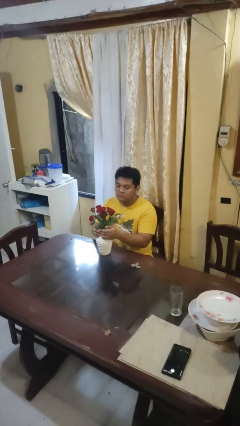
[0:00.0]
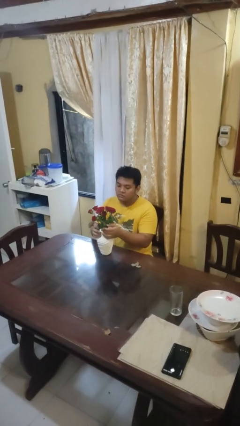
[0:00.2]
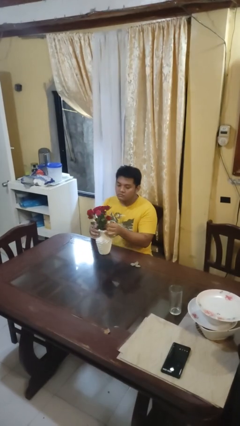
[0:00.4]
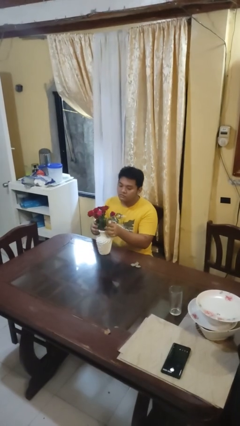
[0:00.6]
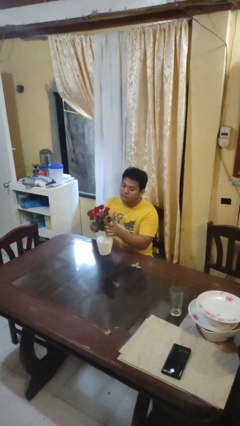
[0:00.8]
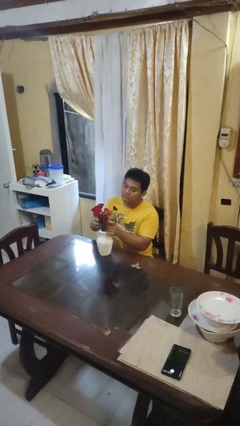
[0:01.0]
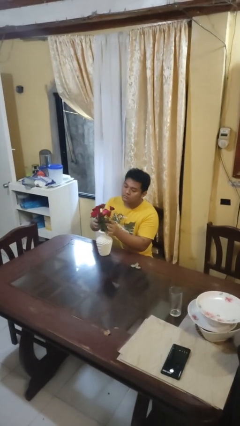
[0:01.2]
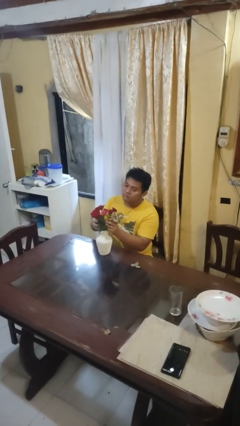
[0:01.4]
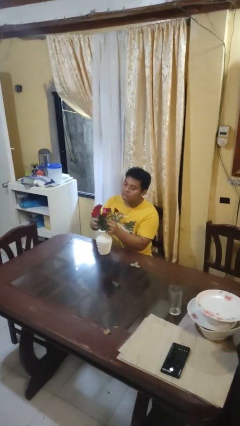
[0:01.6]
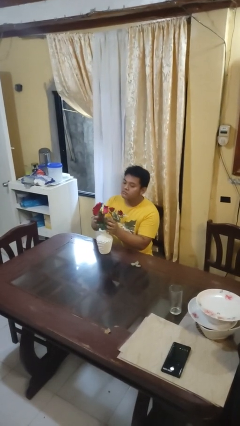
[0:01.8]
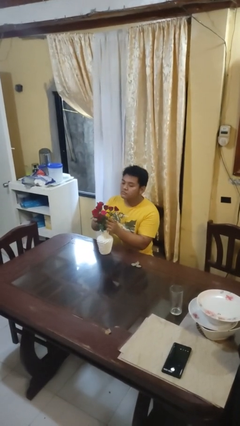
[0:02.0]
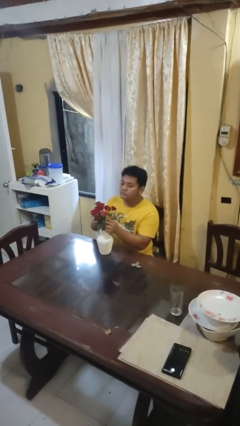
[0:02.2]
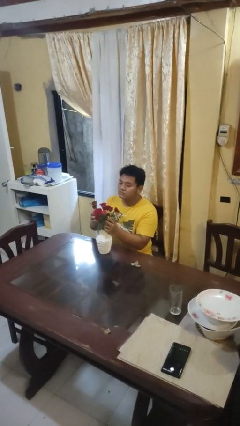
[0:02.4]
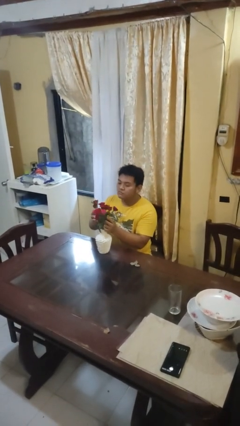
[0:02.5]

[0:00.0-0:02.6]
person arranges flowers in vase

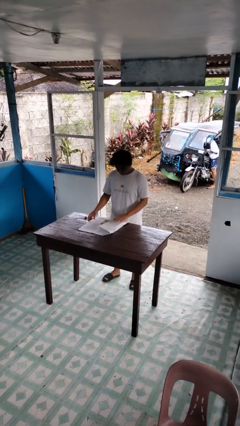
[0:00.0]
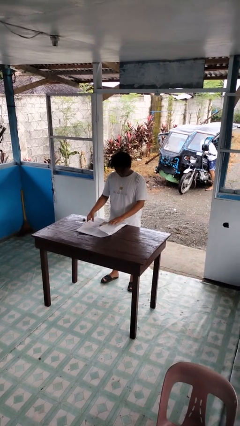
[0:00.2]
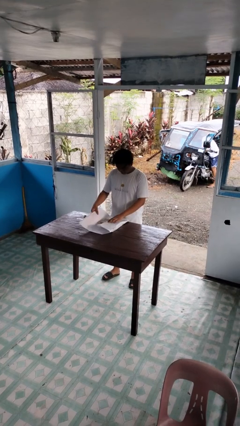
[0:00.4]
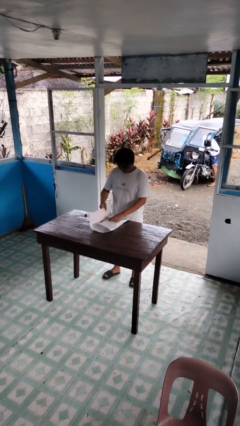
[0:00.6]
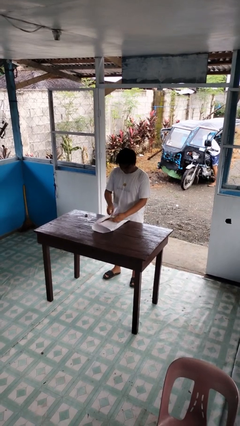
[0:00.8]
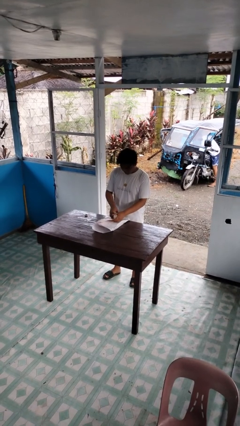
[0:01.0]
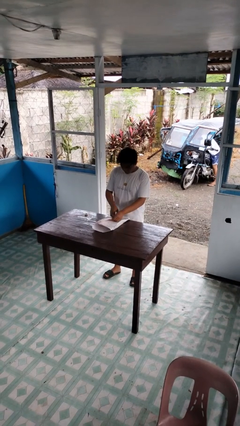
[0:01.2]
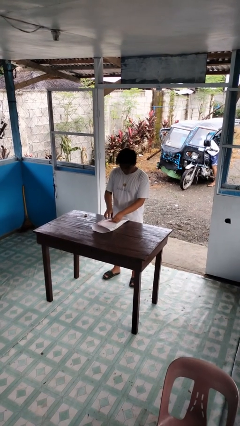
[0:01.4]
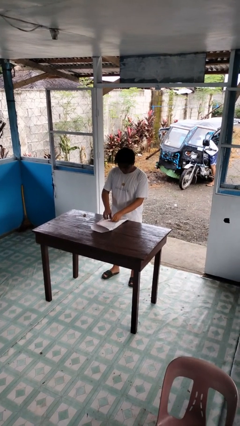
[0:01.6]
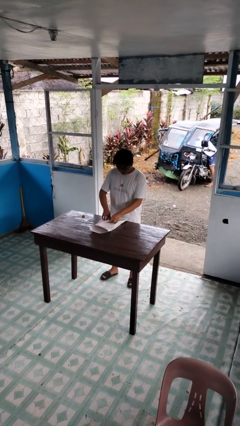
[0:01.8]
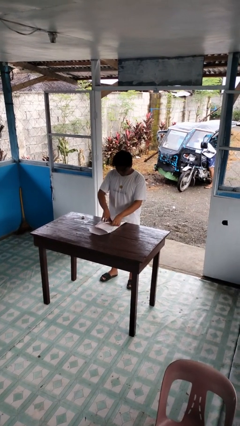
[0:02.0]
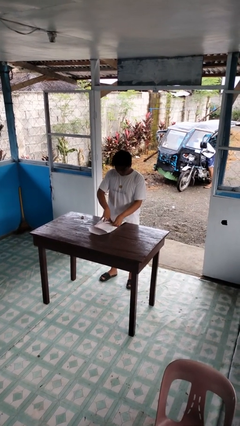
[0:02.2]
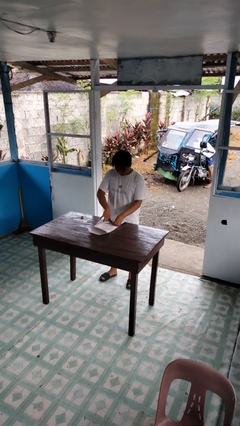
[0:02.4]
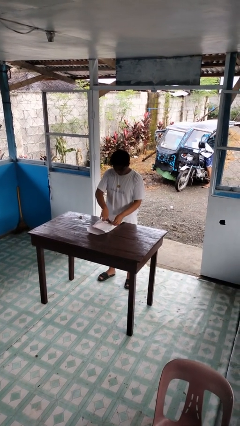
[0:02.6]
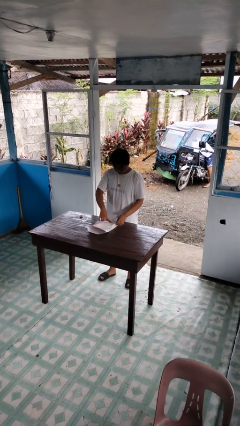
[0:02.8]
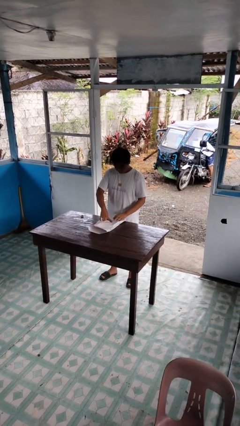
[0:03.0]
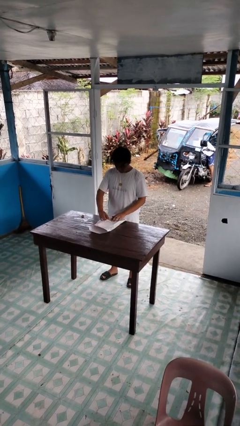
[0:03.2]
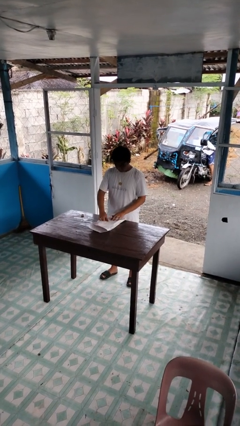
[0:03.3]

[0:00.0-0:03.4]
person wraps box

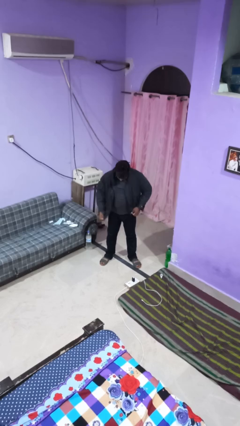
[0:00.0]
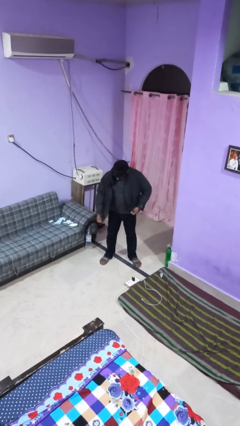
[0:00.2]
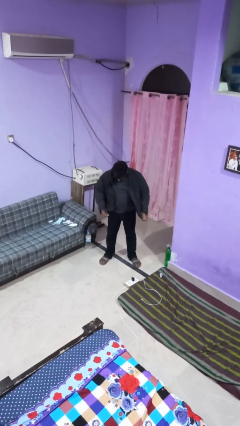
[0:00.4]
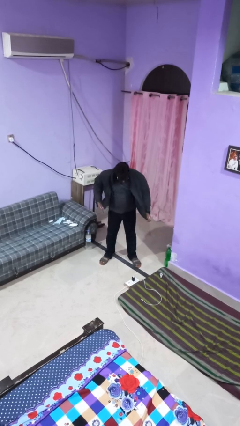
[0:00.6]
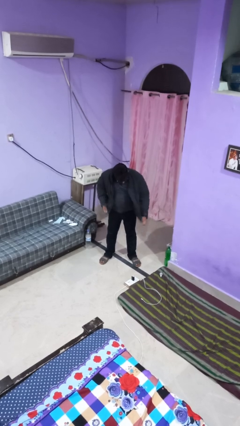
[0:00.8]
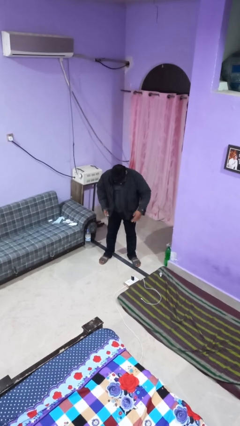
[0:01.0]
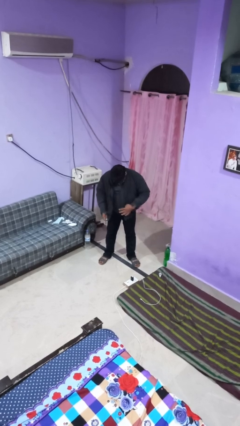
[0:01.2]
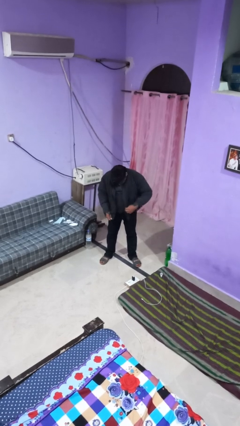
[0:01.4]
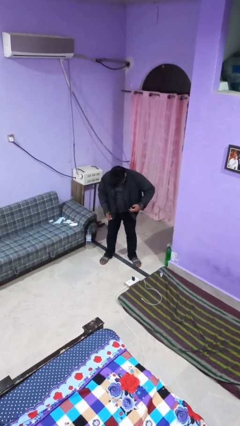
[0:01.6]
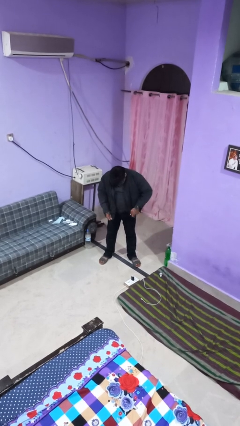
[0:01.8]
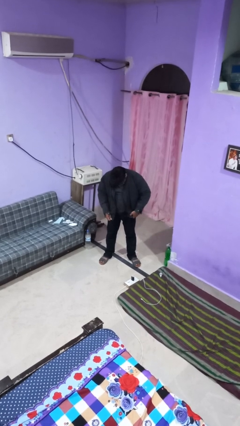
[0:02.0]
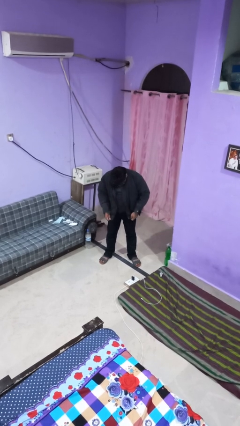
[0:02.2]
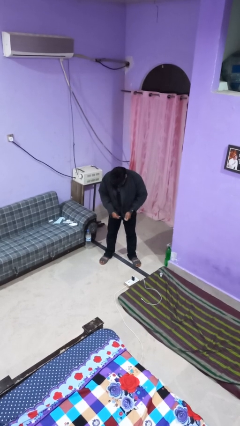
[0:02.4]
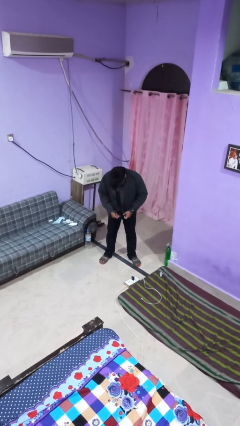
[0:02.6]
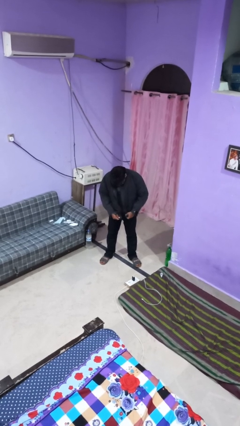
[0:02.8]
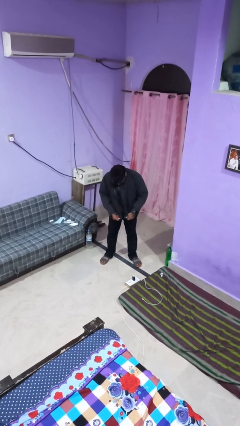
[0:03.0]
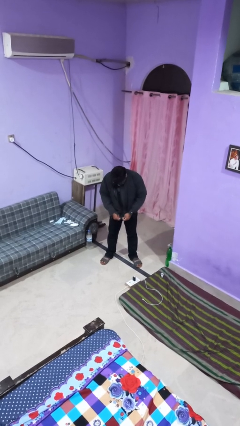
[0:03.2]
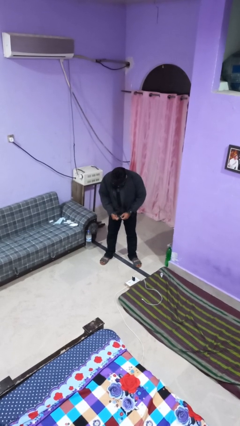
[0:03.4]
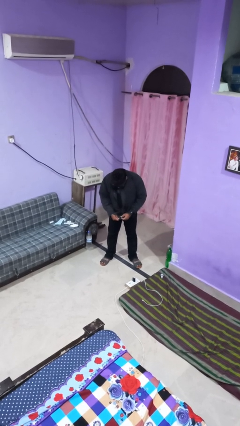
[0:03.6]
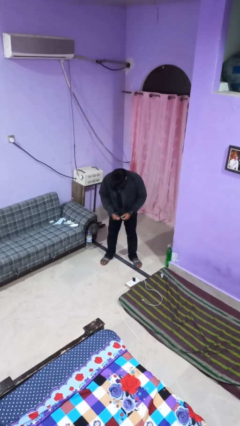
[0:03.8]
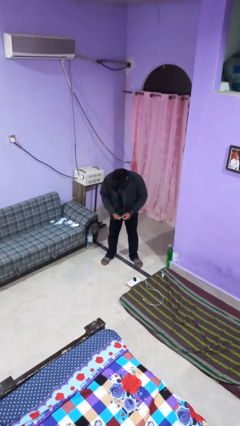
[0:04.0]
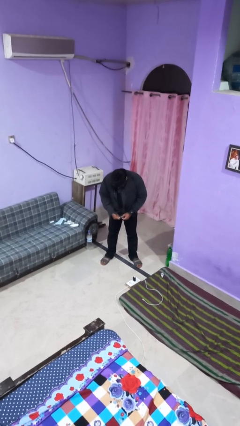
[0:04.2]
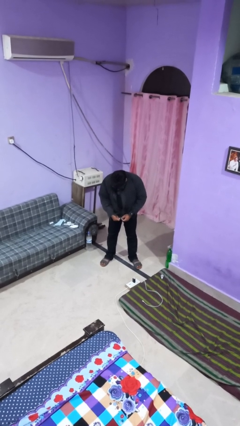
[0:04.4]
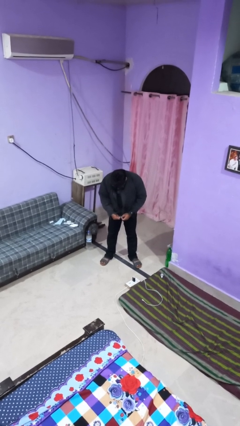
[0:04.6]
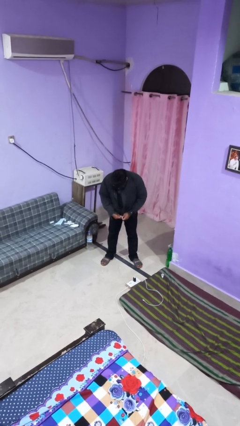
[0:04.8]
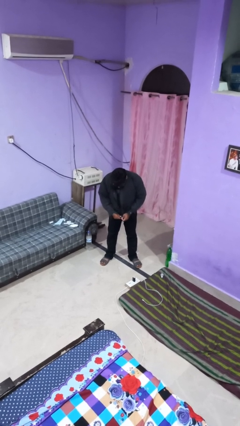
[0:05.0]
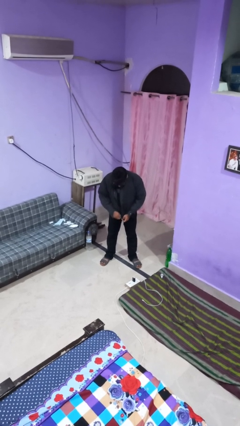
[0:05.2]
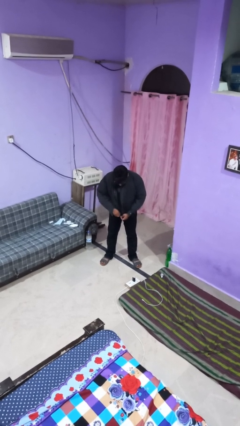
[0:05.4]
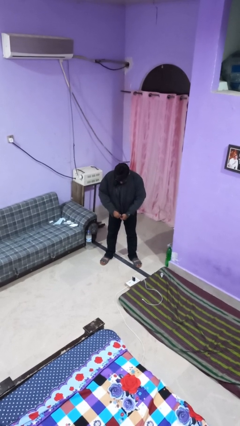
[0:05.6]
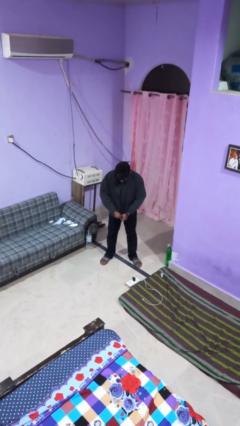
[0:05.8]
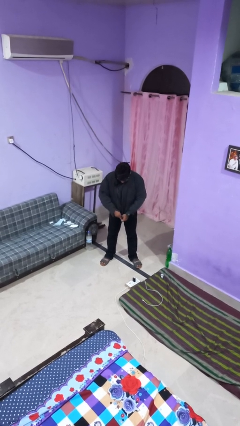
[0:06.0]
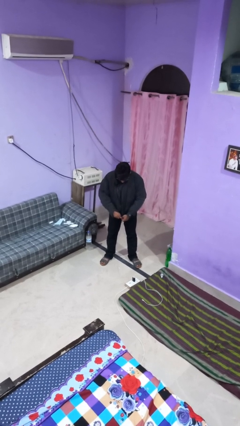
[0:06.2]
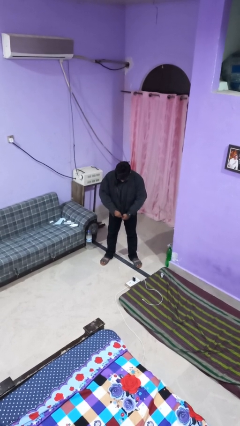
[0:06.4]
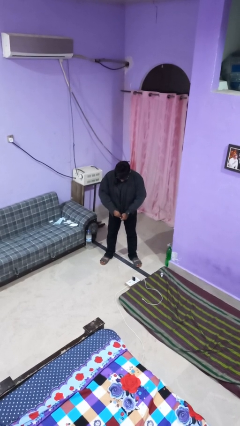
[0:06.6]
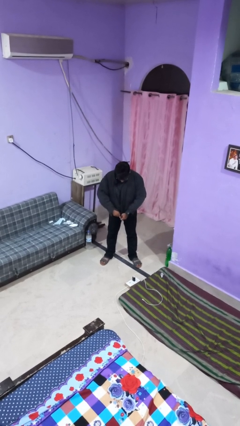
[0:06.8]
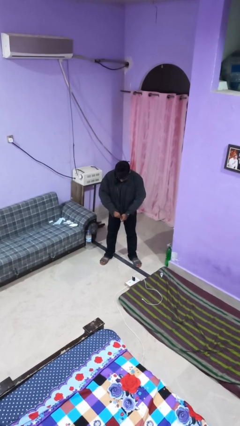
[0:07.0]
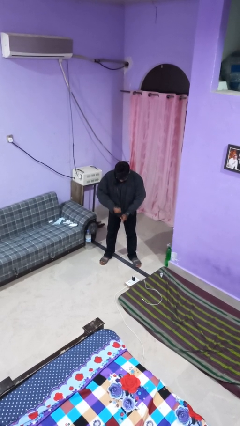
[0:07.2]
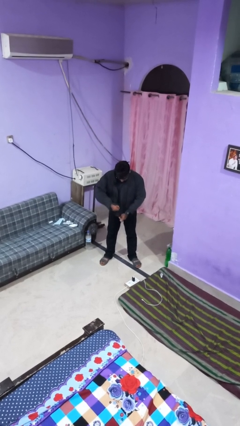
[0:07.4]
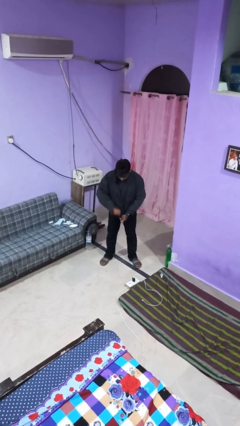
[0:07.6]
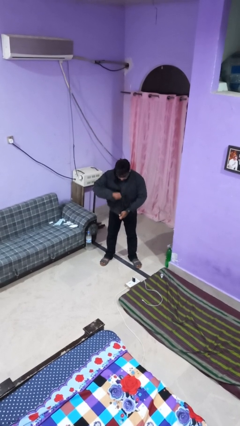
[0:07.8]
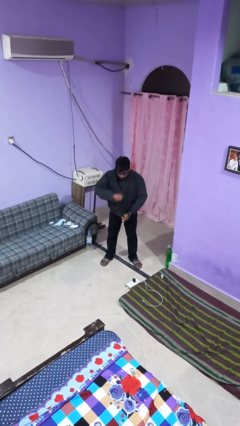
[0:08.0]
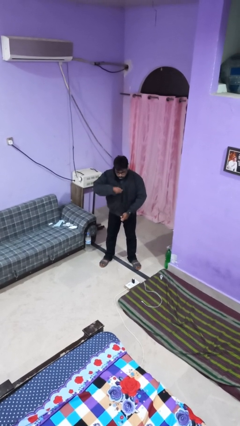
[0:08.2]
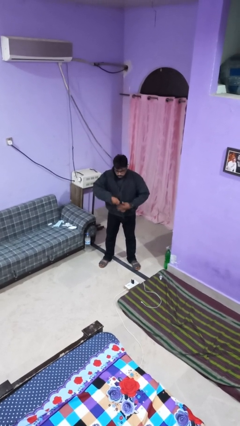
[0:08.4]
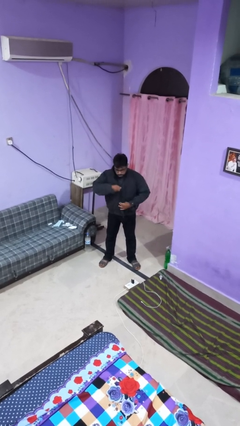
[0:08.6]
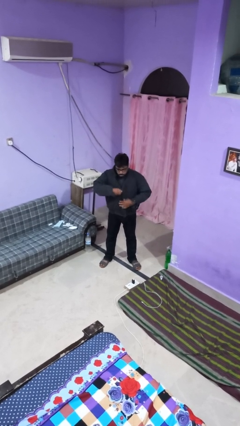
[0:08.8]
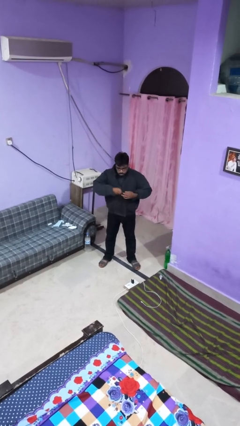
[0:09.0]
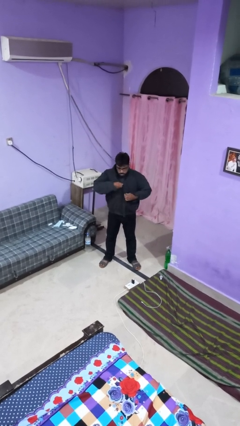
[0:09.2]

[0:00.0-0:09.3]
person zips up jacket

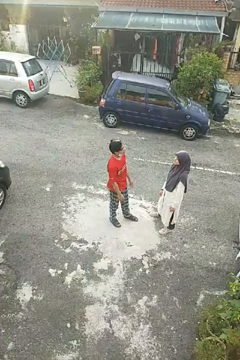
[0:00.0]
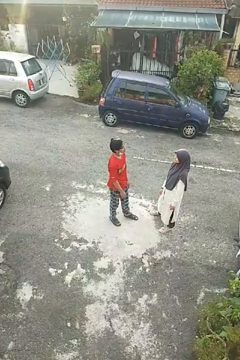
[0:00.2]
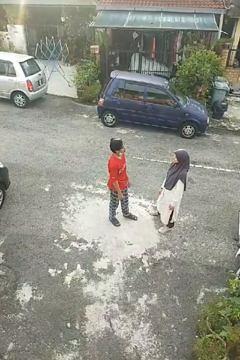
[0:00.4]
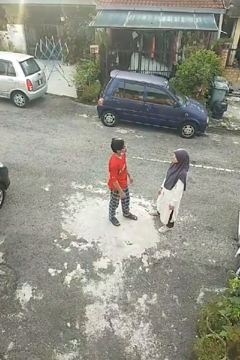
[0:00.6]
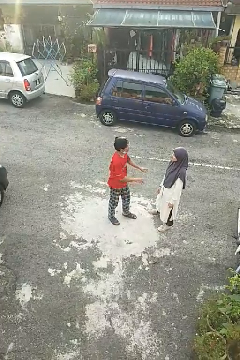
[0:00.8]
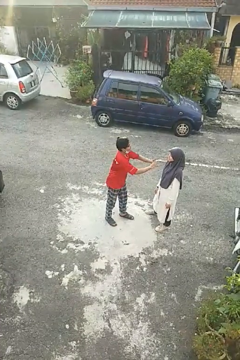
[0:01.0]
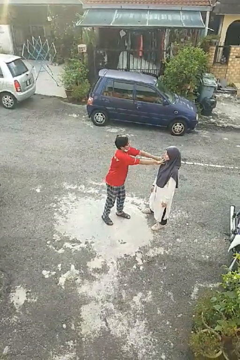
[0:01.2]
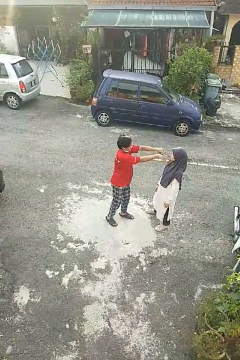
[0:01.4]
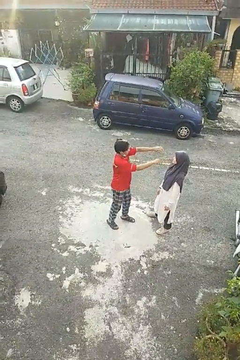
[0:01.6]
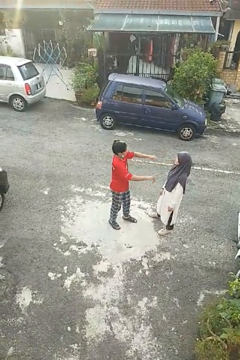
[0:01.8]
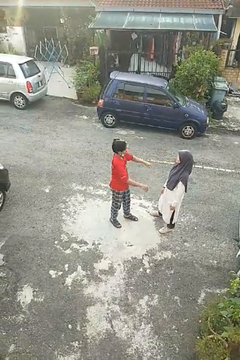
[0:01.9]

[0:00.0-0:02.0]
person shoves person

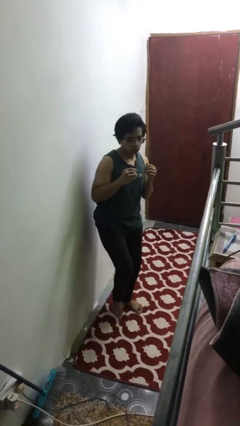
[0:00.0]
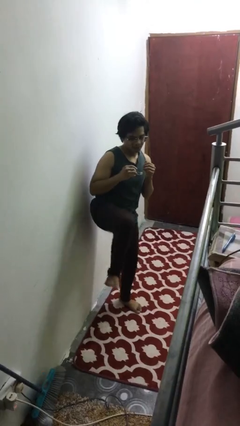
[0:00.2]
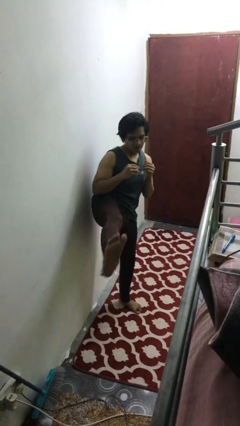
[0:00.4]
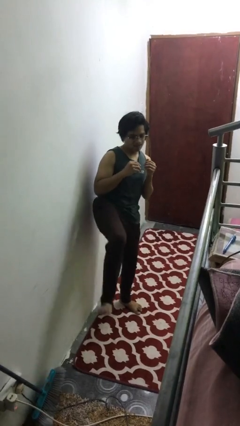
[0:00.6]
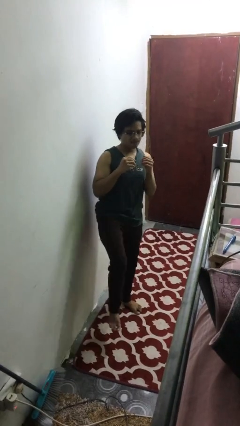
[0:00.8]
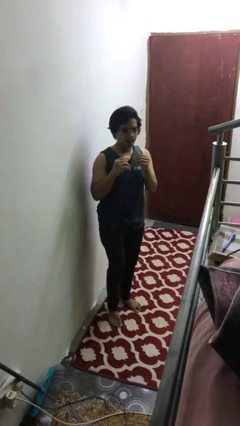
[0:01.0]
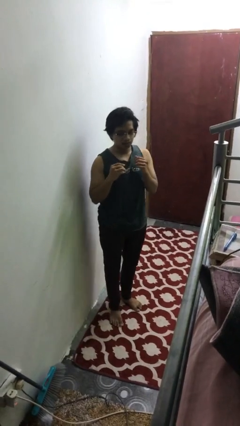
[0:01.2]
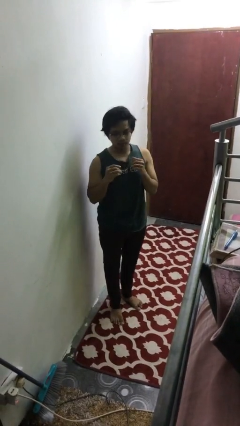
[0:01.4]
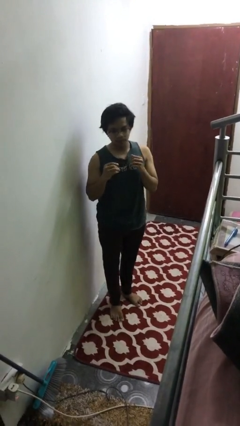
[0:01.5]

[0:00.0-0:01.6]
person karate kicks
